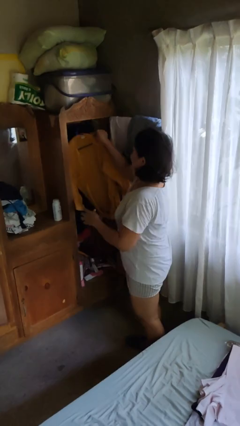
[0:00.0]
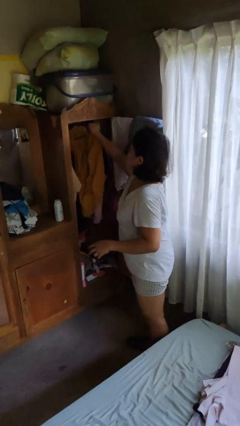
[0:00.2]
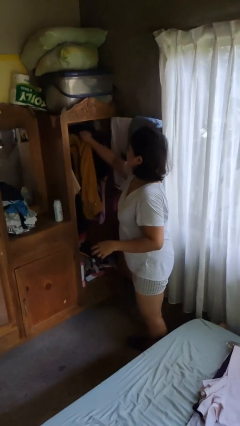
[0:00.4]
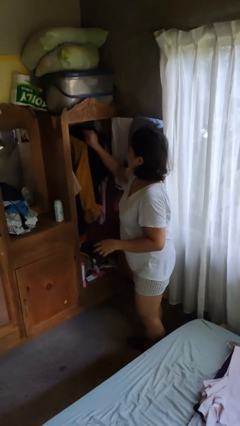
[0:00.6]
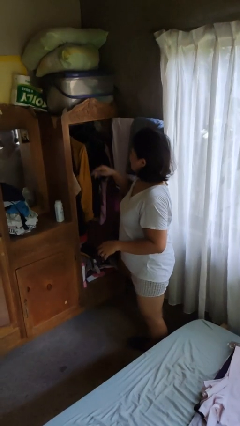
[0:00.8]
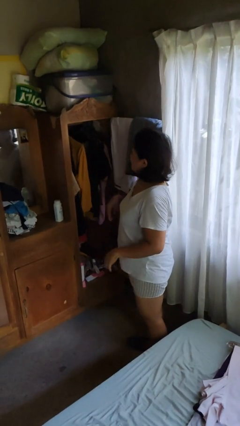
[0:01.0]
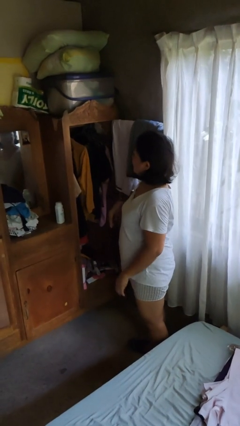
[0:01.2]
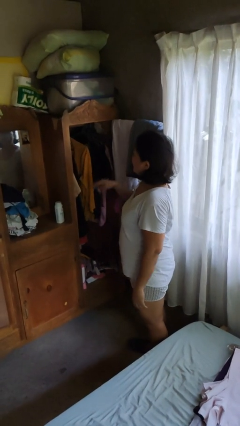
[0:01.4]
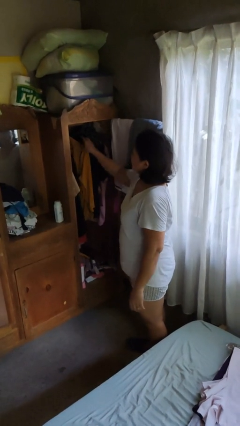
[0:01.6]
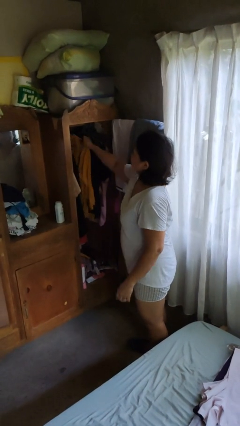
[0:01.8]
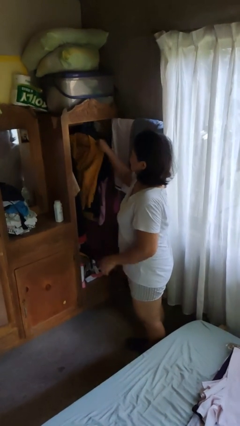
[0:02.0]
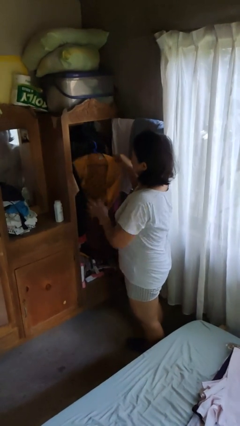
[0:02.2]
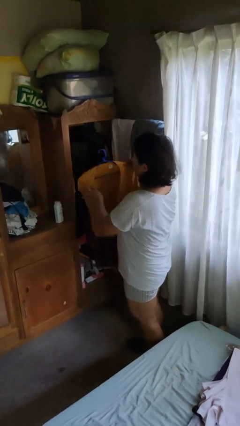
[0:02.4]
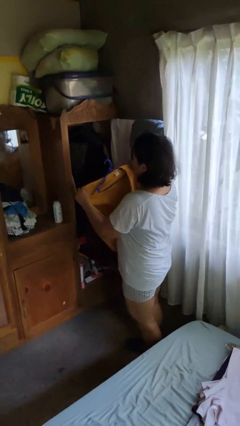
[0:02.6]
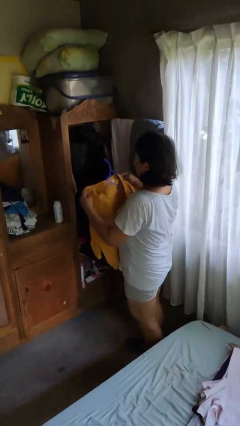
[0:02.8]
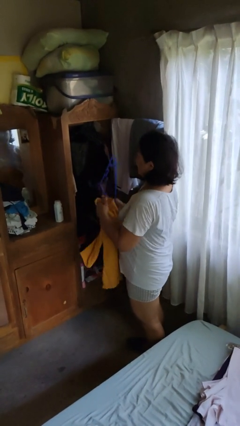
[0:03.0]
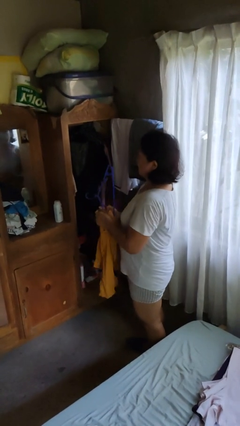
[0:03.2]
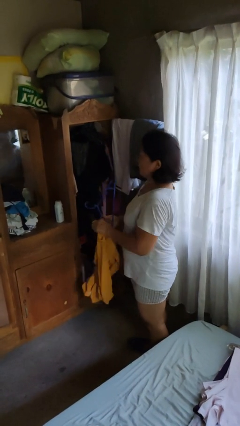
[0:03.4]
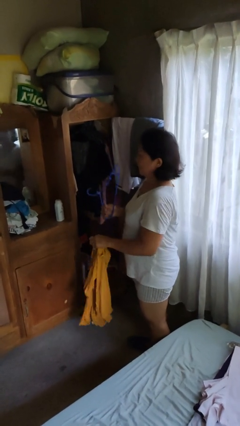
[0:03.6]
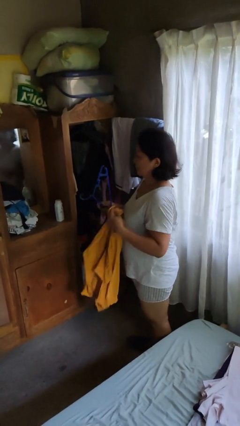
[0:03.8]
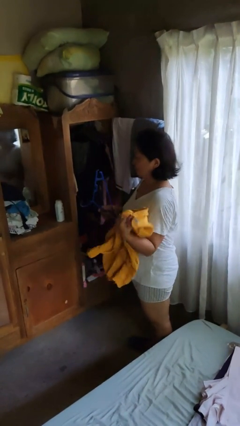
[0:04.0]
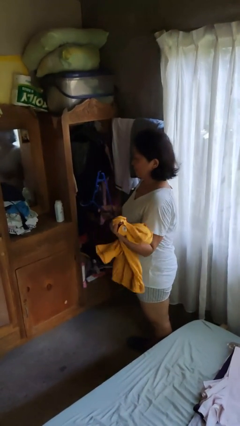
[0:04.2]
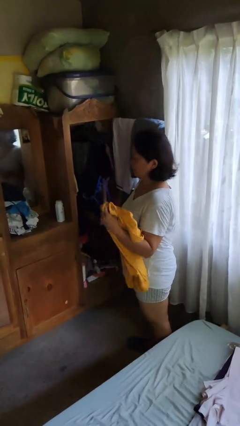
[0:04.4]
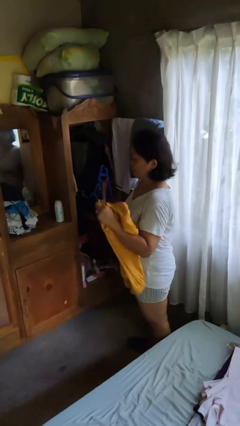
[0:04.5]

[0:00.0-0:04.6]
person takes clothes from closet

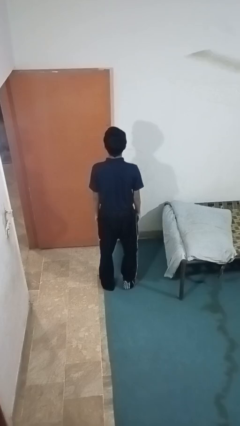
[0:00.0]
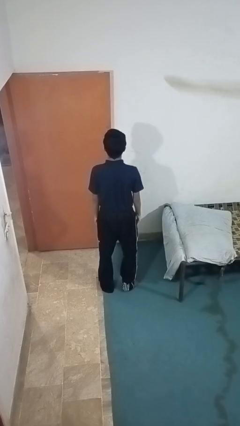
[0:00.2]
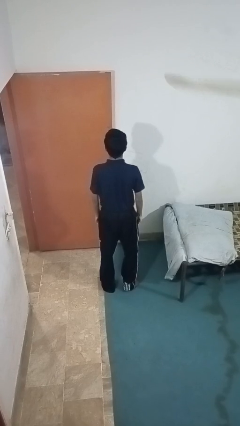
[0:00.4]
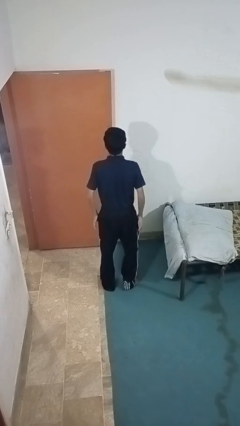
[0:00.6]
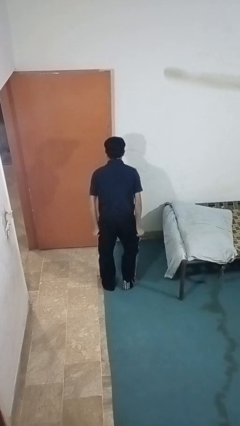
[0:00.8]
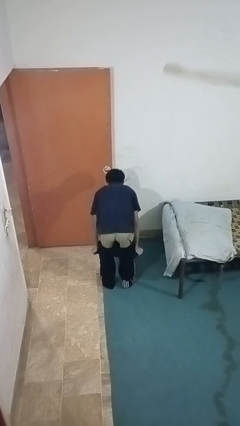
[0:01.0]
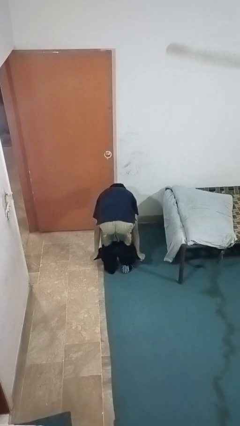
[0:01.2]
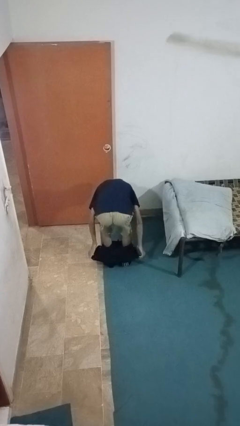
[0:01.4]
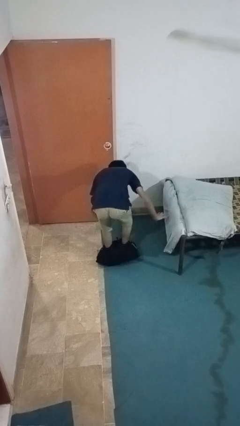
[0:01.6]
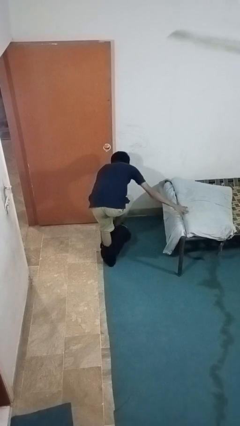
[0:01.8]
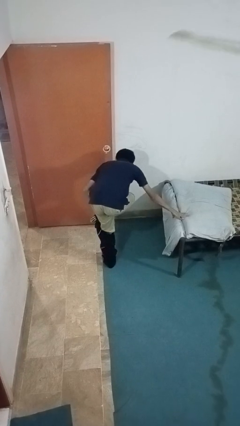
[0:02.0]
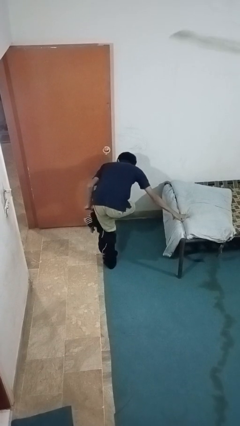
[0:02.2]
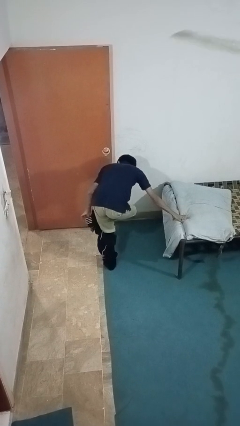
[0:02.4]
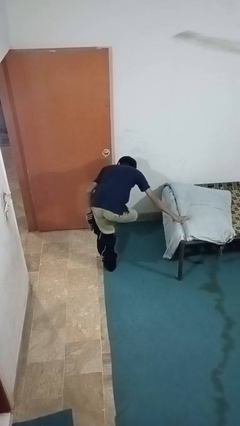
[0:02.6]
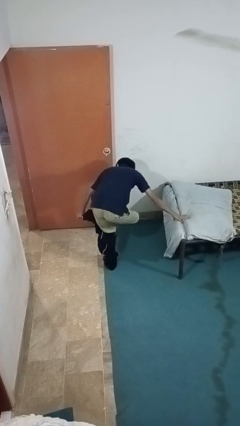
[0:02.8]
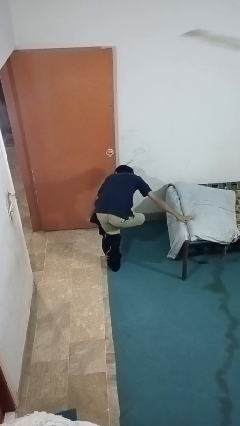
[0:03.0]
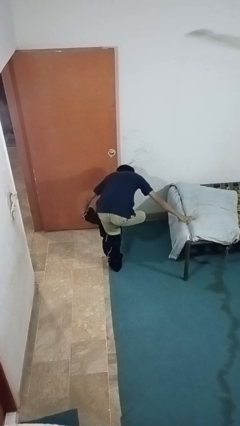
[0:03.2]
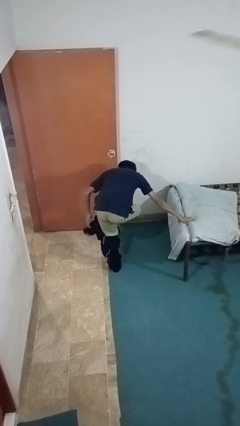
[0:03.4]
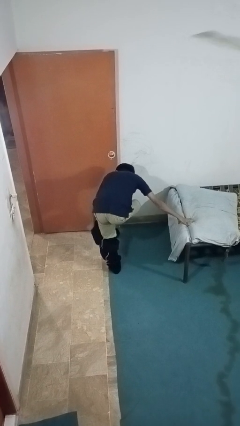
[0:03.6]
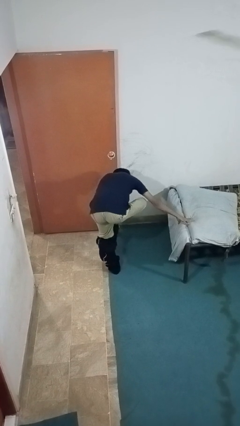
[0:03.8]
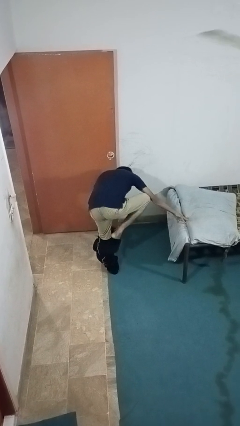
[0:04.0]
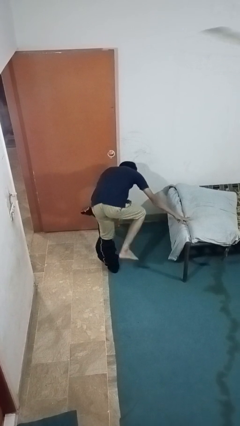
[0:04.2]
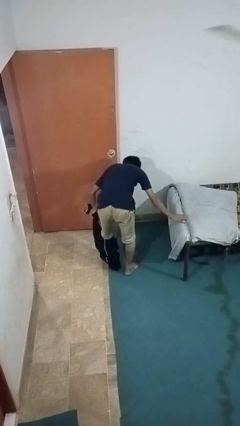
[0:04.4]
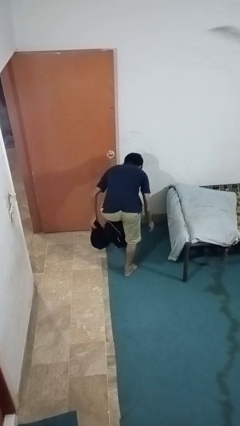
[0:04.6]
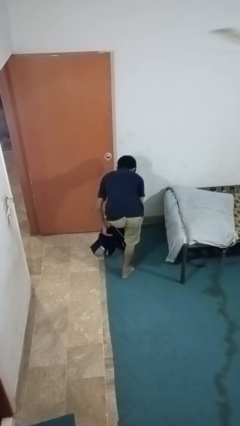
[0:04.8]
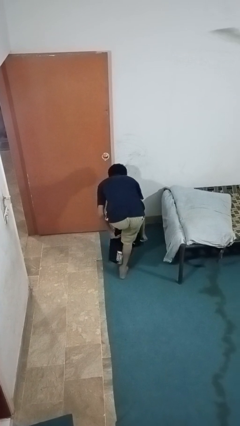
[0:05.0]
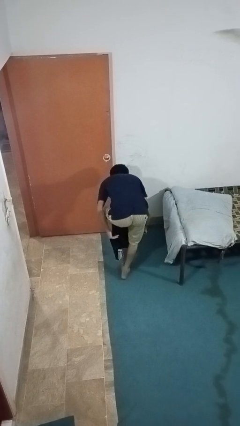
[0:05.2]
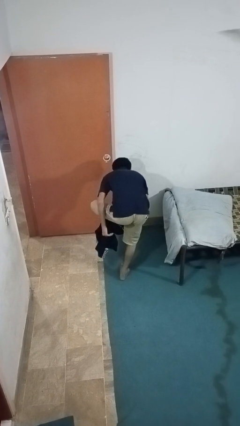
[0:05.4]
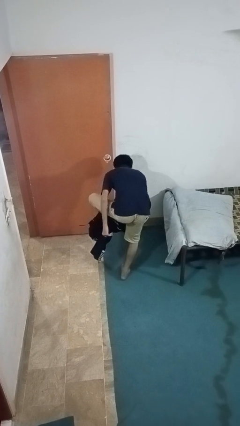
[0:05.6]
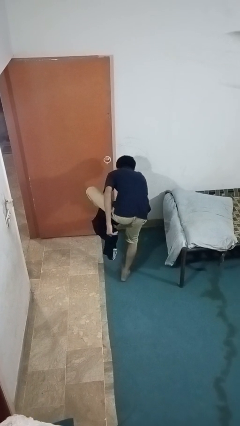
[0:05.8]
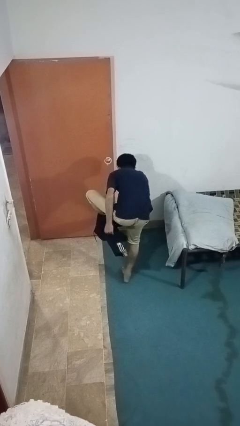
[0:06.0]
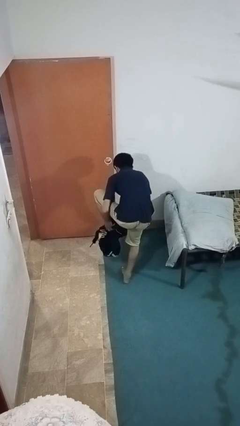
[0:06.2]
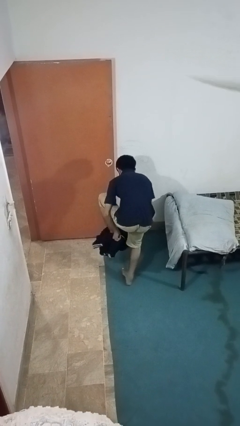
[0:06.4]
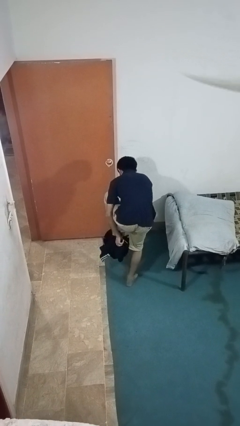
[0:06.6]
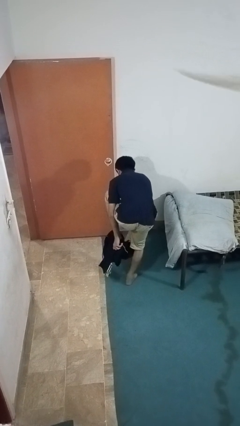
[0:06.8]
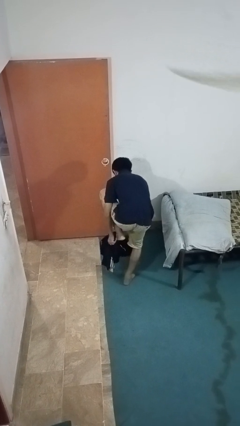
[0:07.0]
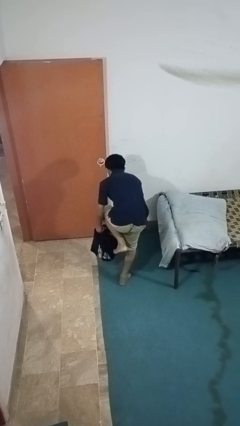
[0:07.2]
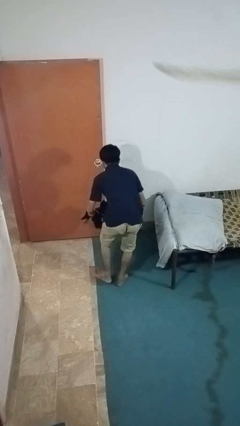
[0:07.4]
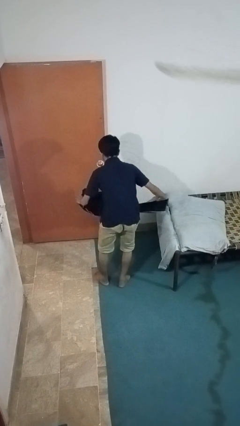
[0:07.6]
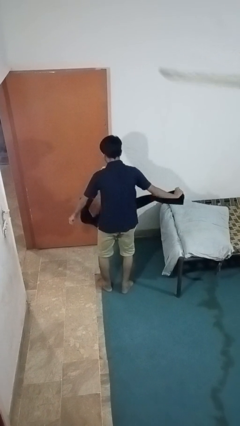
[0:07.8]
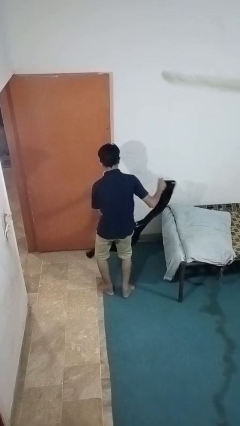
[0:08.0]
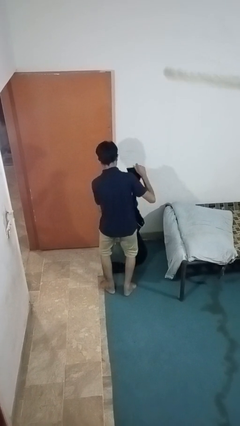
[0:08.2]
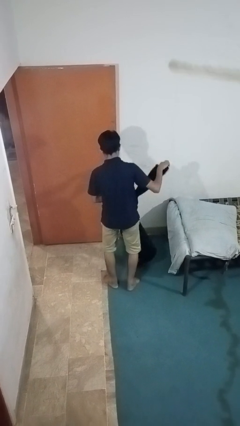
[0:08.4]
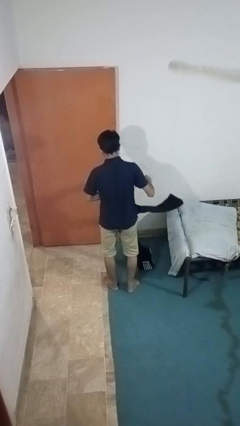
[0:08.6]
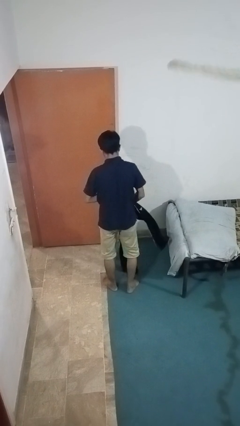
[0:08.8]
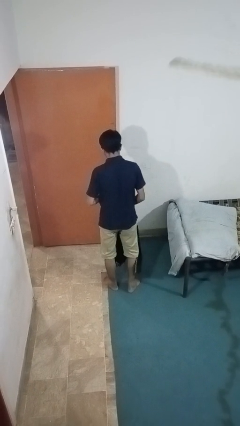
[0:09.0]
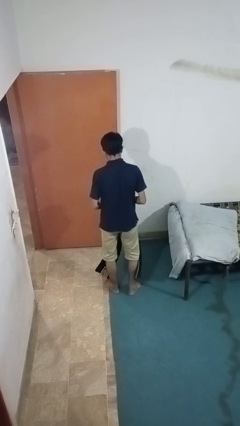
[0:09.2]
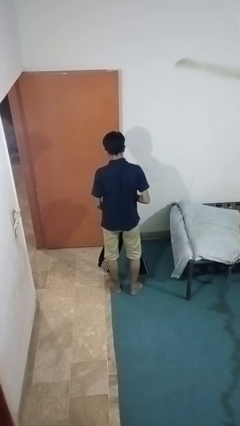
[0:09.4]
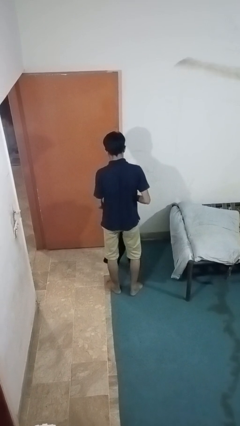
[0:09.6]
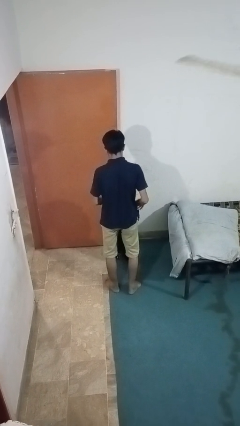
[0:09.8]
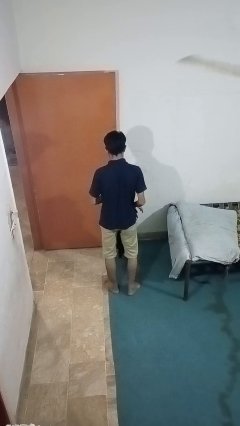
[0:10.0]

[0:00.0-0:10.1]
person takes off pants

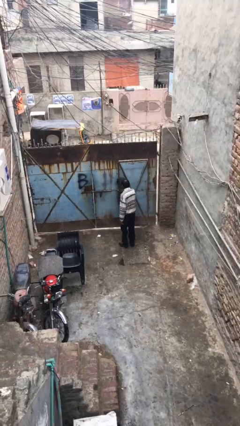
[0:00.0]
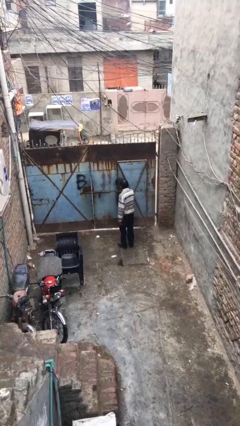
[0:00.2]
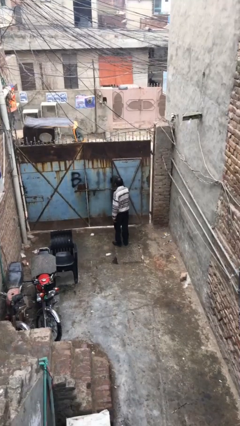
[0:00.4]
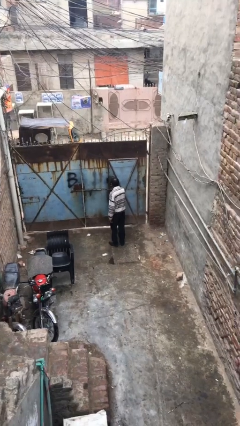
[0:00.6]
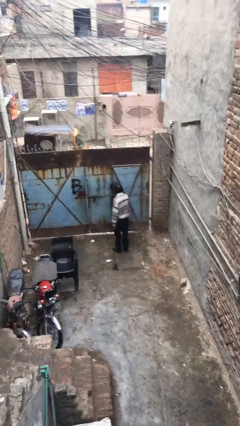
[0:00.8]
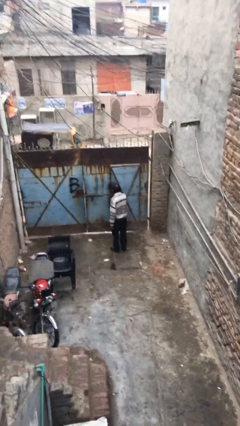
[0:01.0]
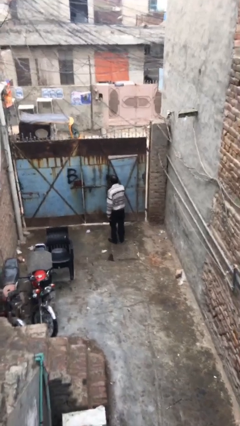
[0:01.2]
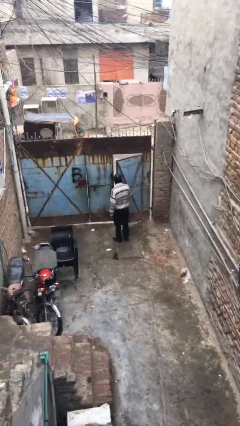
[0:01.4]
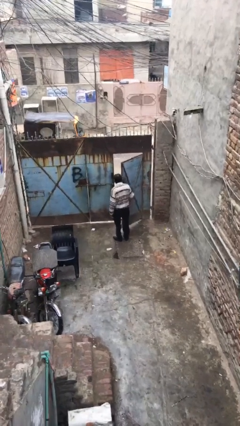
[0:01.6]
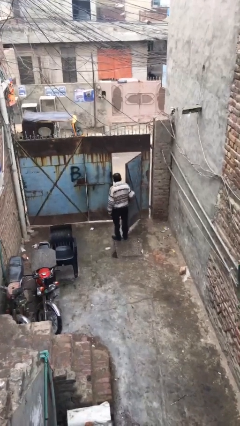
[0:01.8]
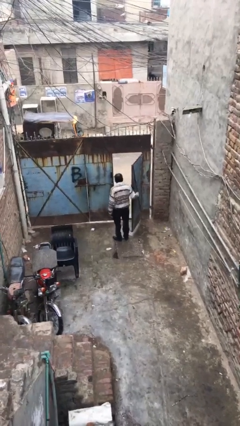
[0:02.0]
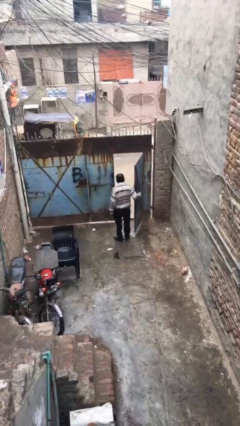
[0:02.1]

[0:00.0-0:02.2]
person opens facility door

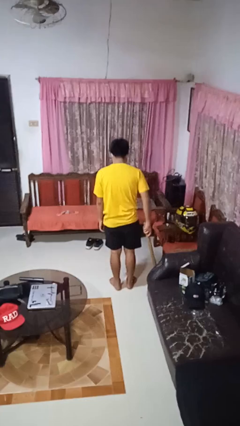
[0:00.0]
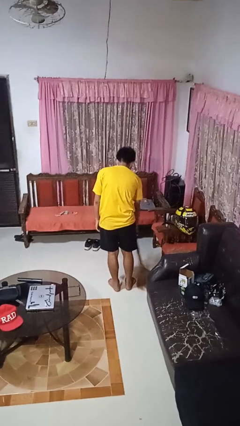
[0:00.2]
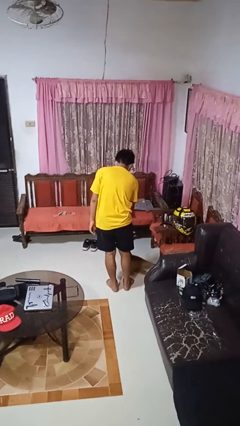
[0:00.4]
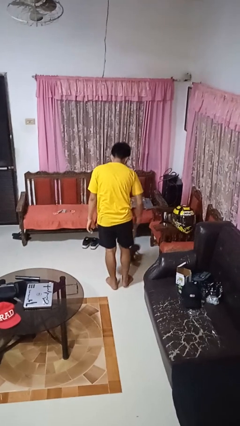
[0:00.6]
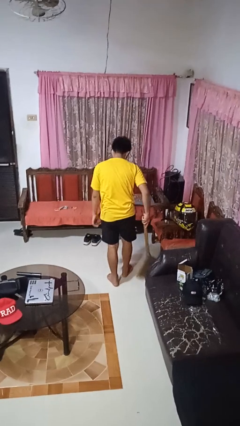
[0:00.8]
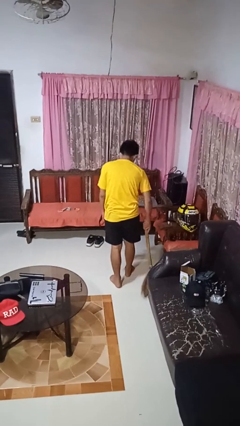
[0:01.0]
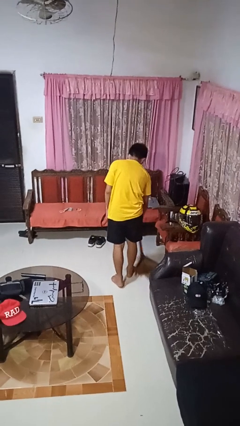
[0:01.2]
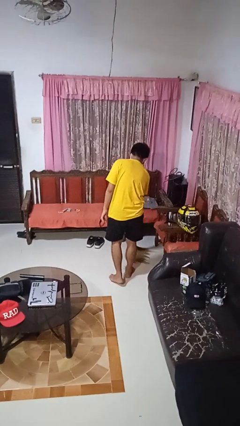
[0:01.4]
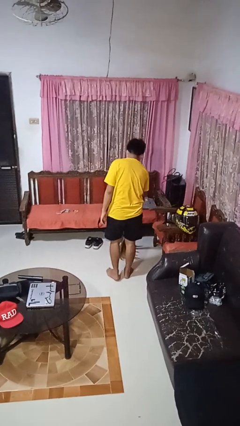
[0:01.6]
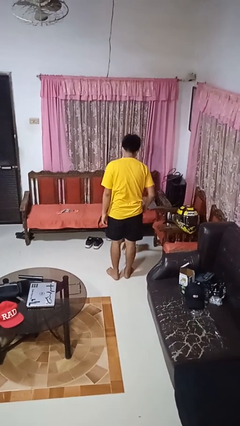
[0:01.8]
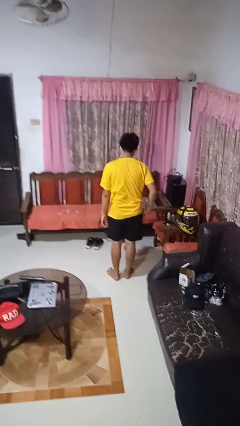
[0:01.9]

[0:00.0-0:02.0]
person sweeps floor
